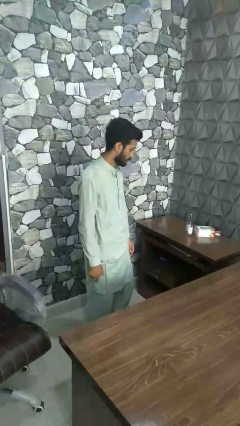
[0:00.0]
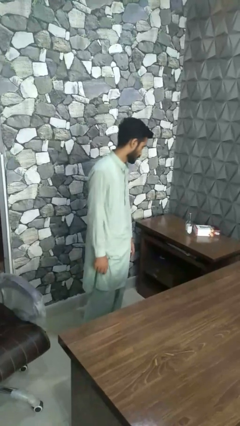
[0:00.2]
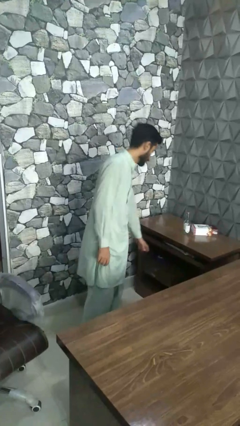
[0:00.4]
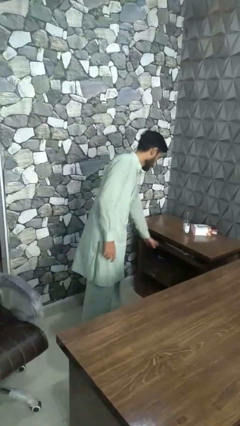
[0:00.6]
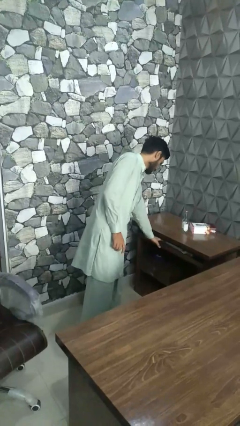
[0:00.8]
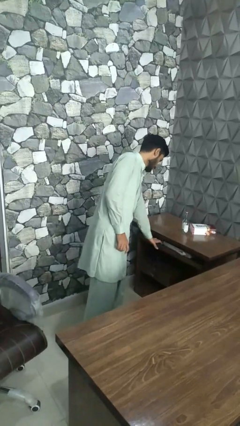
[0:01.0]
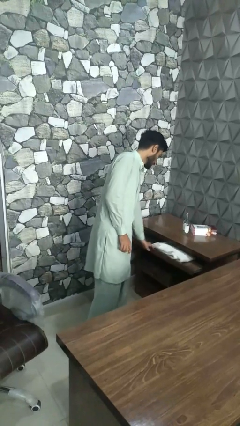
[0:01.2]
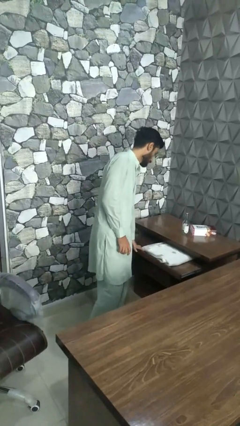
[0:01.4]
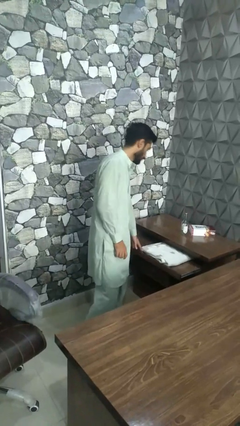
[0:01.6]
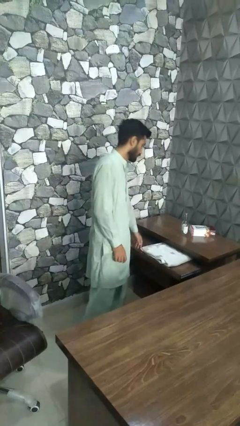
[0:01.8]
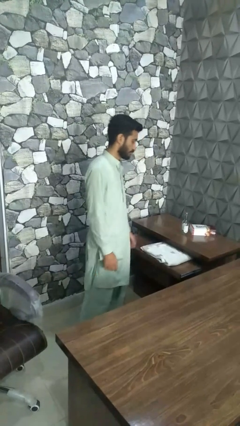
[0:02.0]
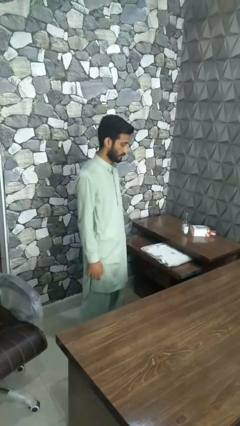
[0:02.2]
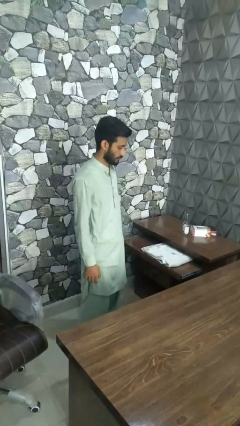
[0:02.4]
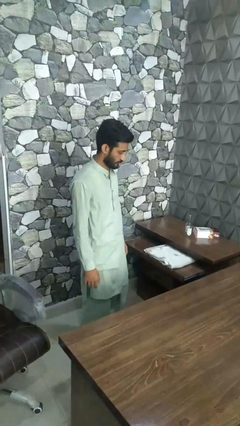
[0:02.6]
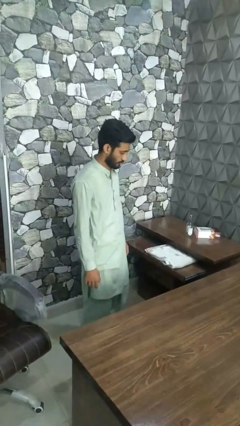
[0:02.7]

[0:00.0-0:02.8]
person opens dresser drawer

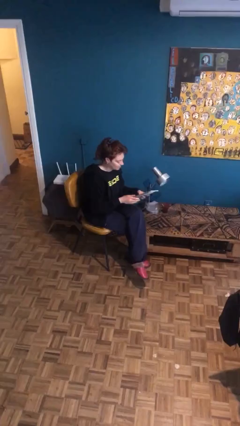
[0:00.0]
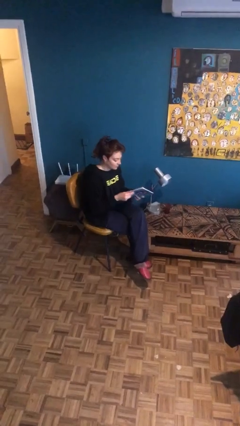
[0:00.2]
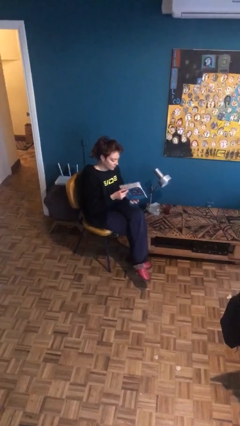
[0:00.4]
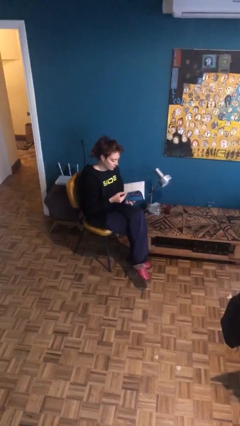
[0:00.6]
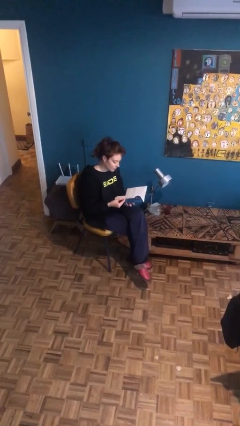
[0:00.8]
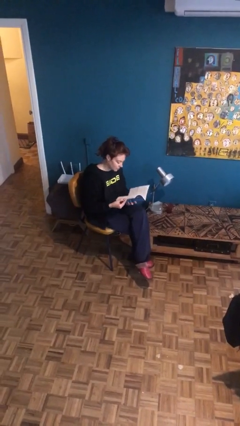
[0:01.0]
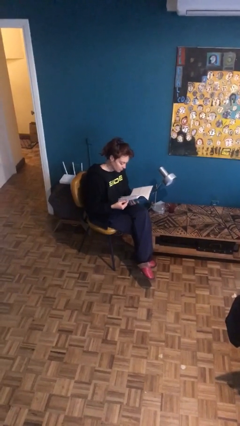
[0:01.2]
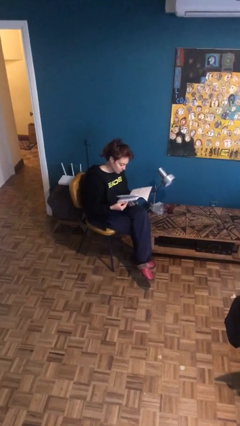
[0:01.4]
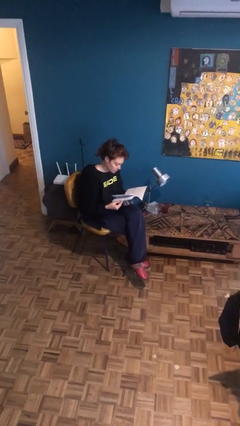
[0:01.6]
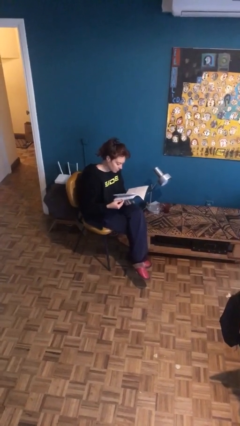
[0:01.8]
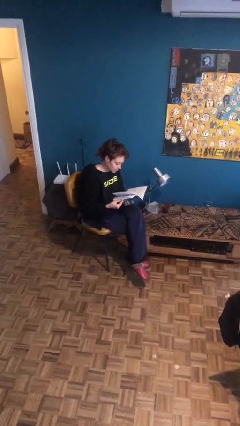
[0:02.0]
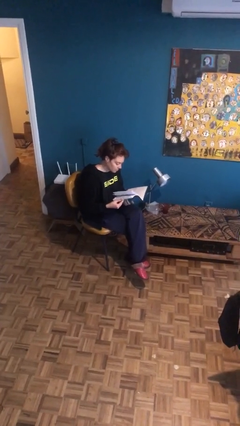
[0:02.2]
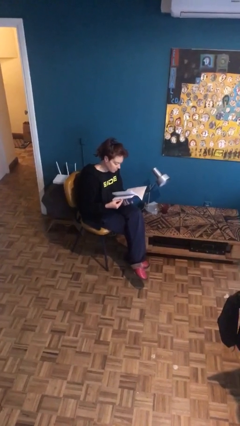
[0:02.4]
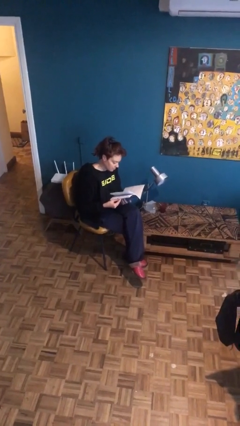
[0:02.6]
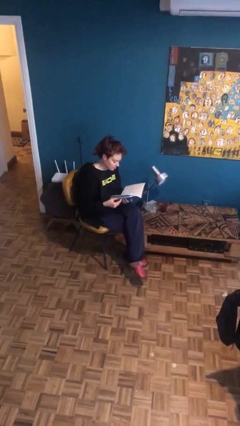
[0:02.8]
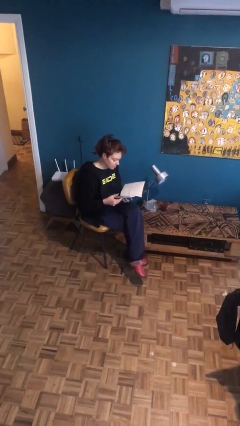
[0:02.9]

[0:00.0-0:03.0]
person reads document

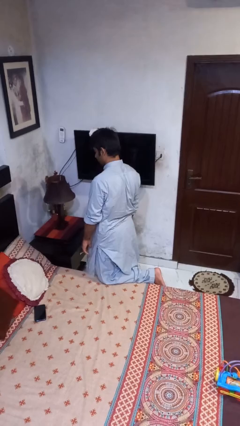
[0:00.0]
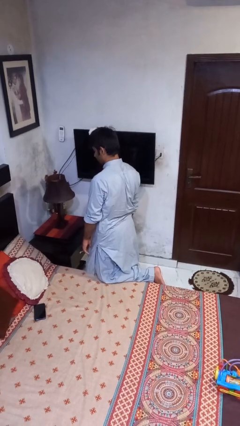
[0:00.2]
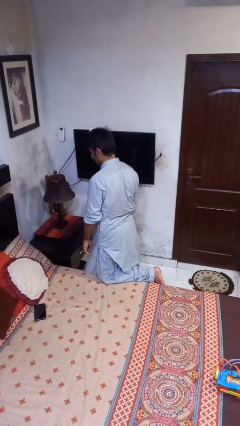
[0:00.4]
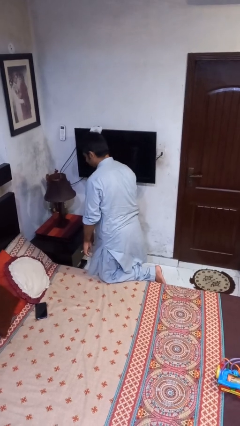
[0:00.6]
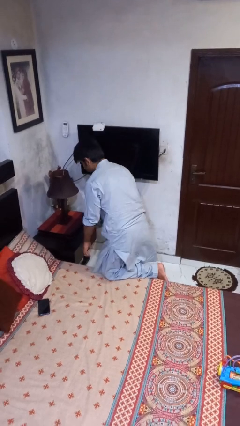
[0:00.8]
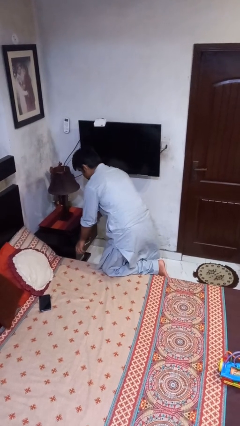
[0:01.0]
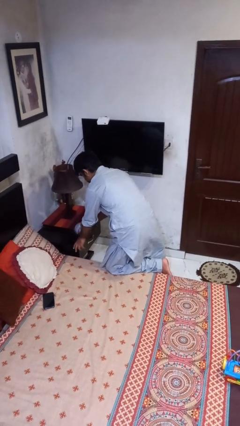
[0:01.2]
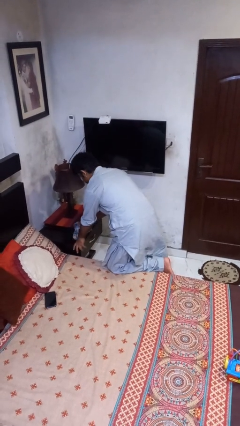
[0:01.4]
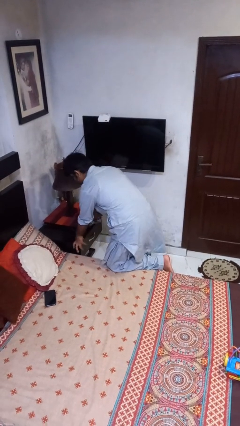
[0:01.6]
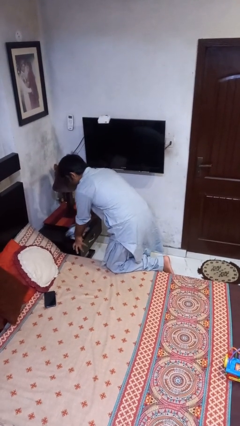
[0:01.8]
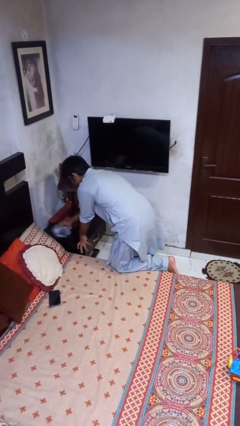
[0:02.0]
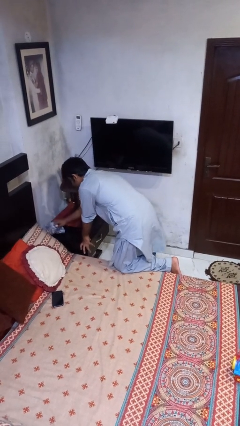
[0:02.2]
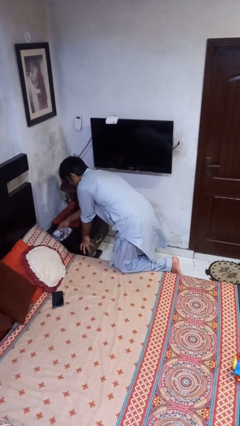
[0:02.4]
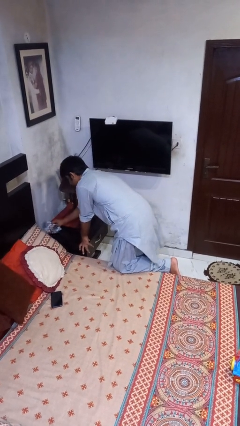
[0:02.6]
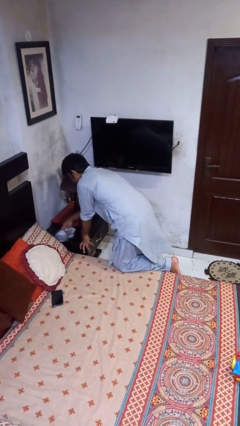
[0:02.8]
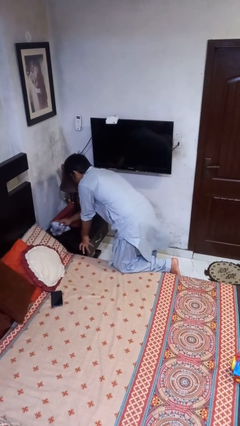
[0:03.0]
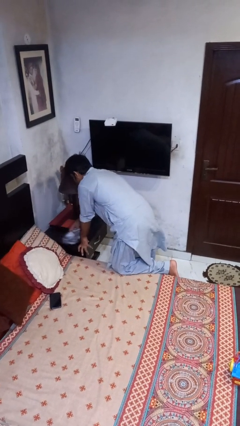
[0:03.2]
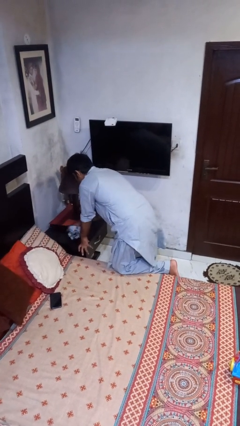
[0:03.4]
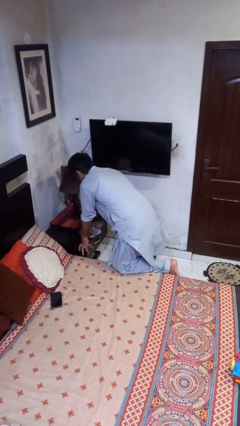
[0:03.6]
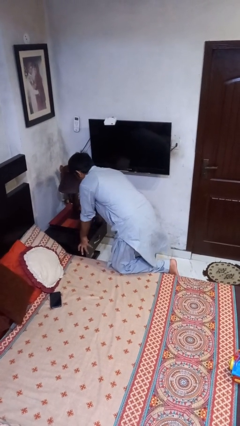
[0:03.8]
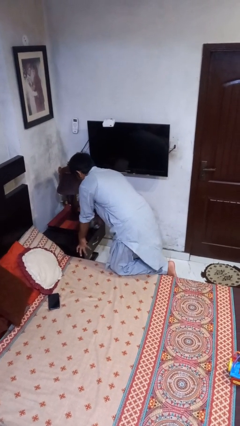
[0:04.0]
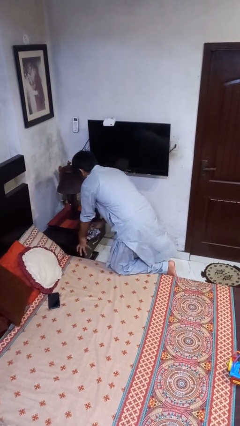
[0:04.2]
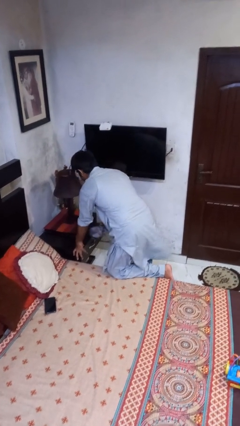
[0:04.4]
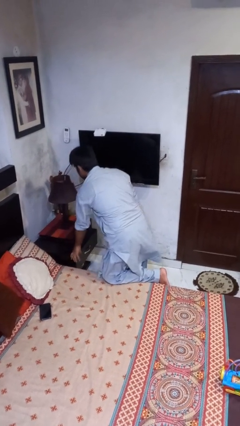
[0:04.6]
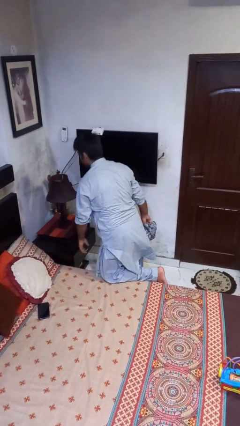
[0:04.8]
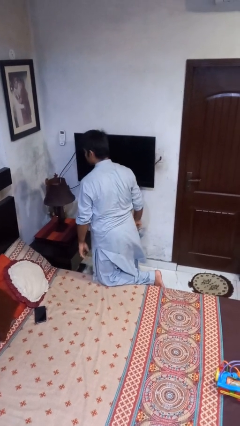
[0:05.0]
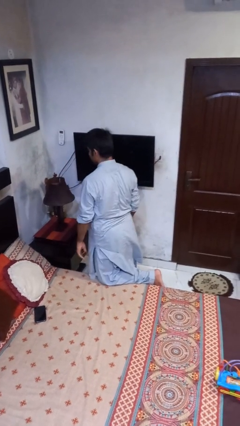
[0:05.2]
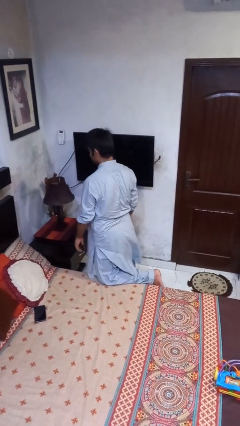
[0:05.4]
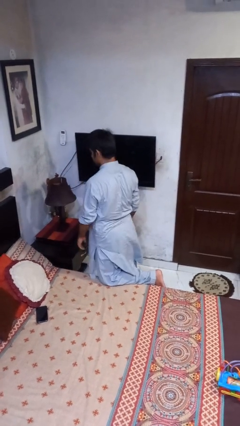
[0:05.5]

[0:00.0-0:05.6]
person cleans table with rag

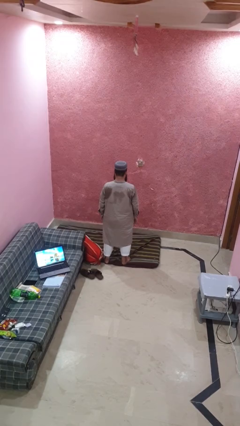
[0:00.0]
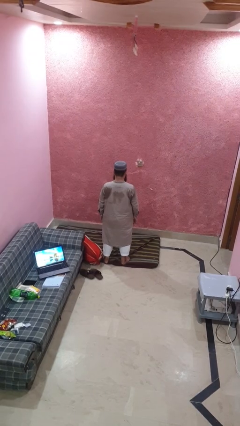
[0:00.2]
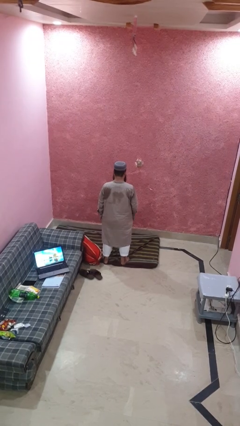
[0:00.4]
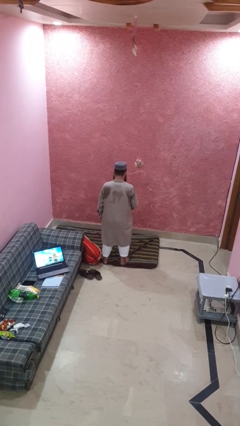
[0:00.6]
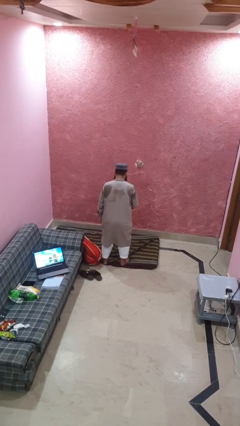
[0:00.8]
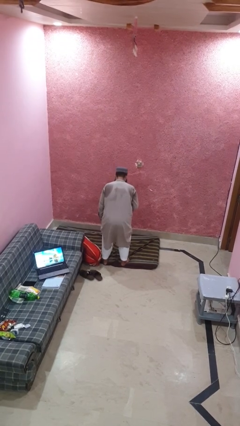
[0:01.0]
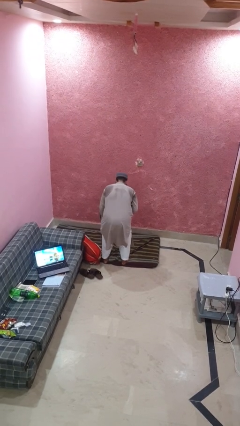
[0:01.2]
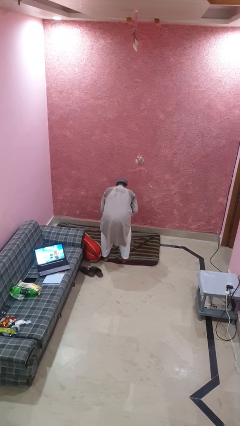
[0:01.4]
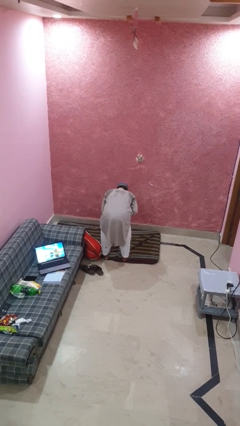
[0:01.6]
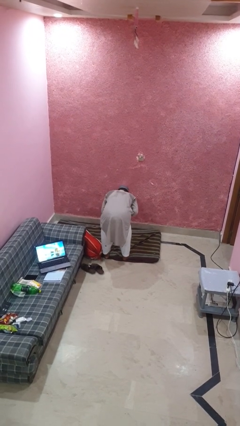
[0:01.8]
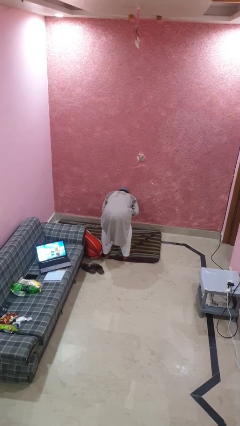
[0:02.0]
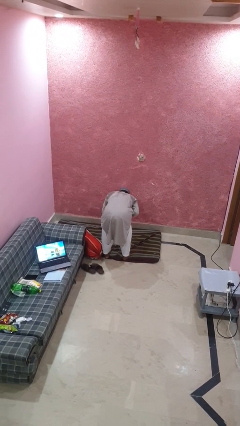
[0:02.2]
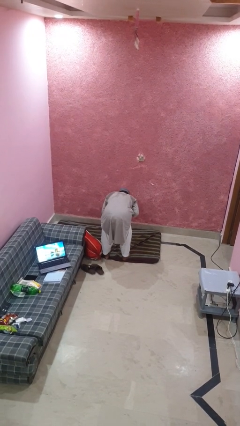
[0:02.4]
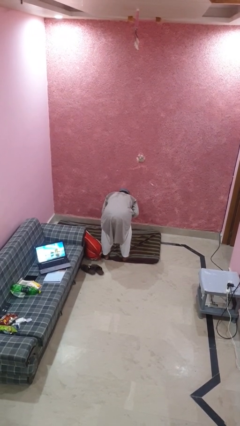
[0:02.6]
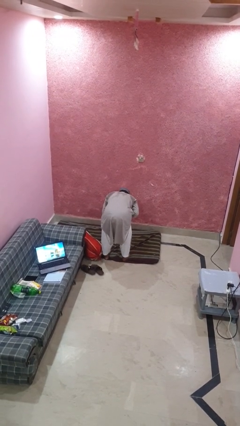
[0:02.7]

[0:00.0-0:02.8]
person bows

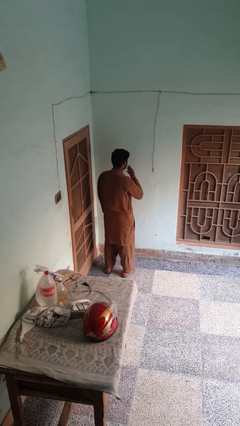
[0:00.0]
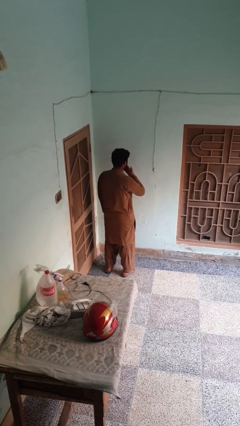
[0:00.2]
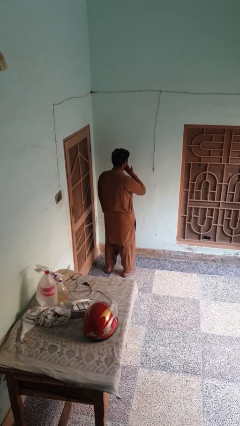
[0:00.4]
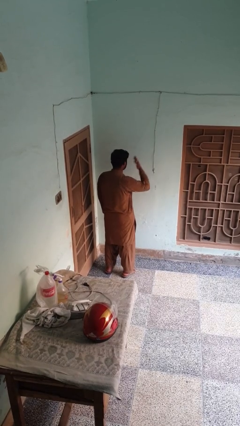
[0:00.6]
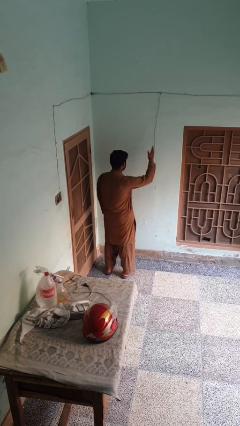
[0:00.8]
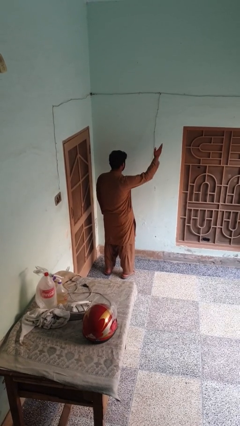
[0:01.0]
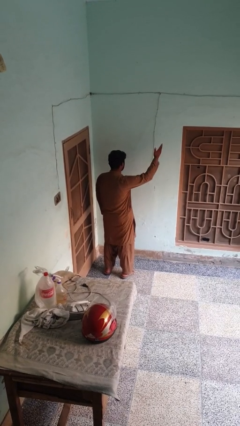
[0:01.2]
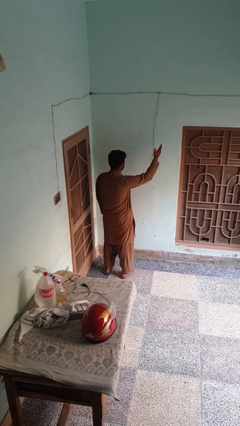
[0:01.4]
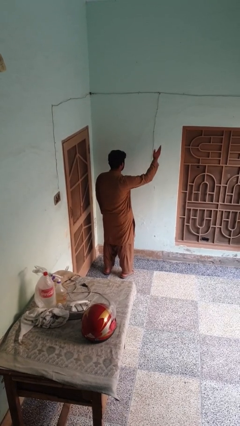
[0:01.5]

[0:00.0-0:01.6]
person gestures blow kiss

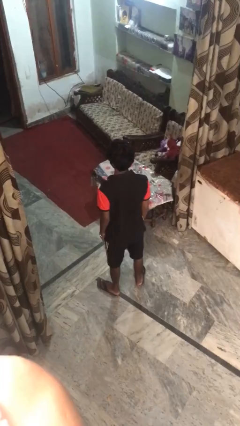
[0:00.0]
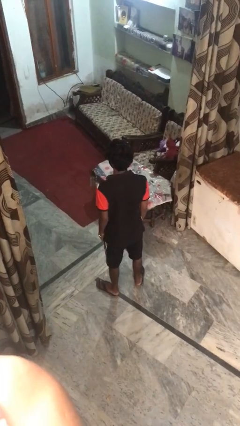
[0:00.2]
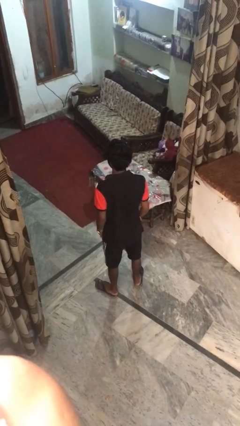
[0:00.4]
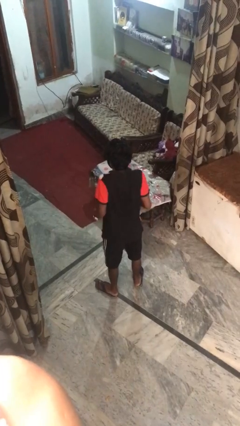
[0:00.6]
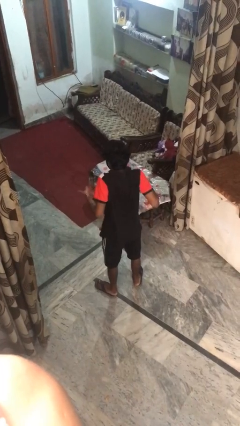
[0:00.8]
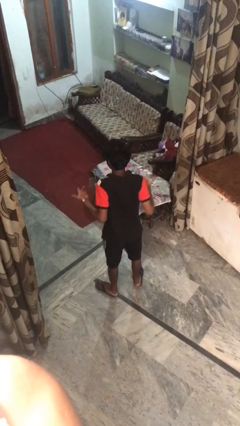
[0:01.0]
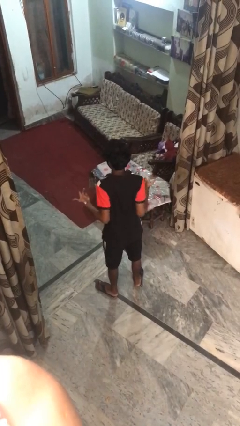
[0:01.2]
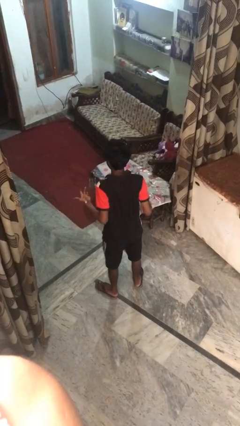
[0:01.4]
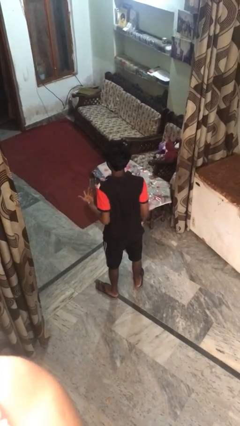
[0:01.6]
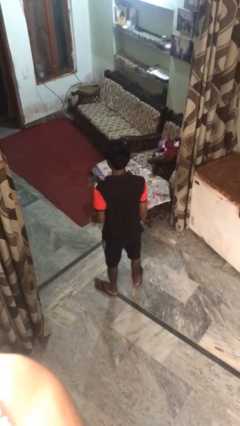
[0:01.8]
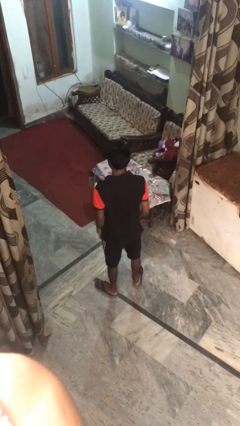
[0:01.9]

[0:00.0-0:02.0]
person shrugs
